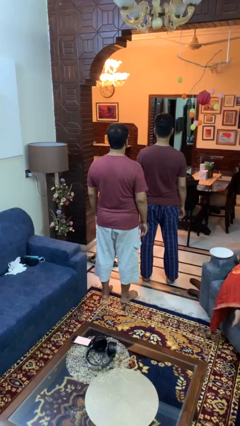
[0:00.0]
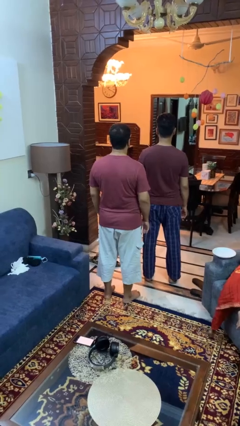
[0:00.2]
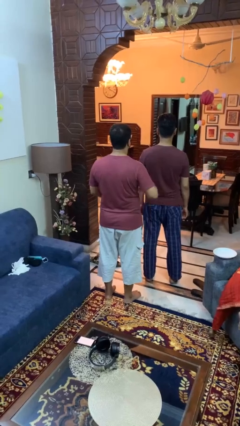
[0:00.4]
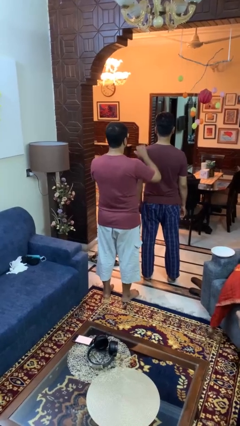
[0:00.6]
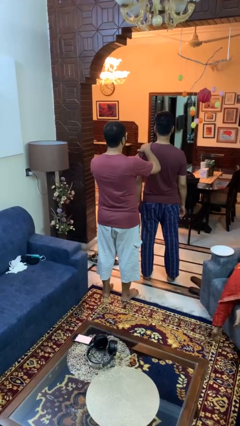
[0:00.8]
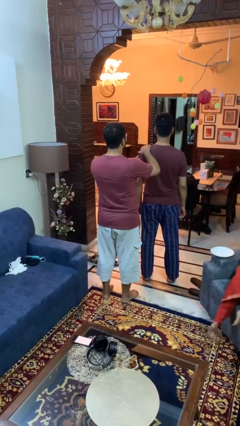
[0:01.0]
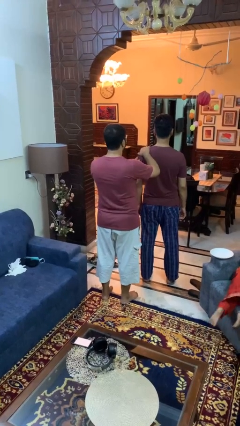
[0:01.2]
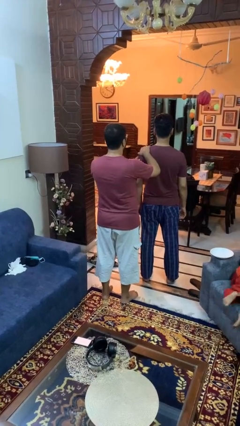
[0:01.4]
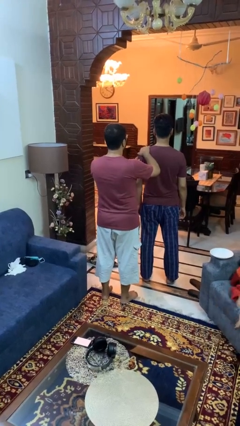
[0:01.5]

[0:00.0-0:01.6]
person grabs person by shoulder

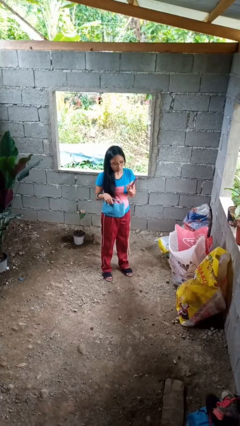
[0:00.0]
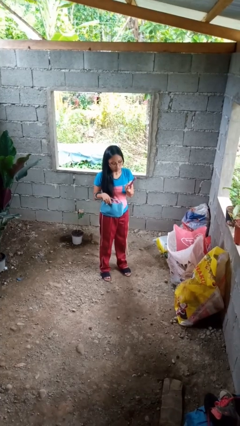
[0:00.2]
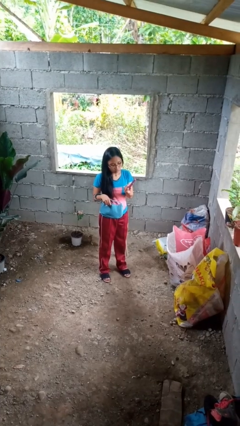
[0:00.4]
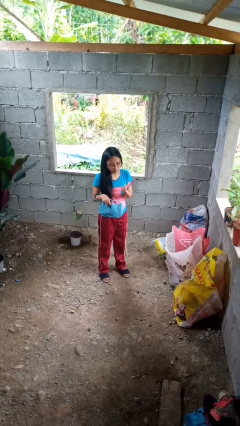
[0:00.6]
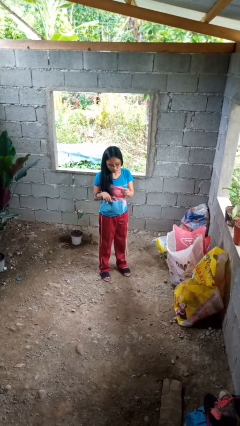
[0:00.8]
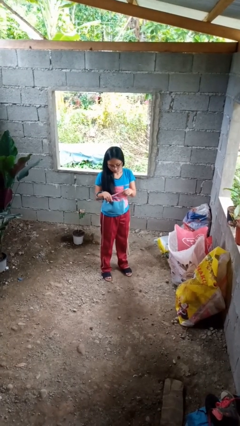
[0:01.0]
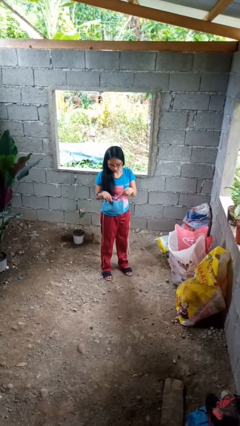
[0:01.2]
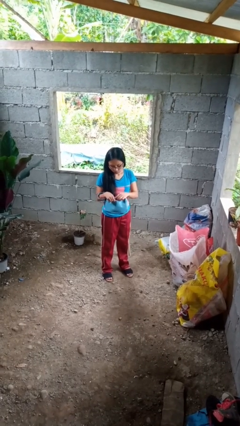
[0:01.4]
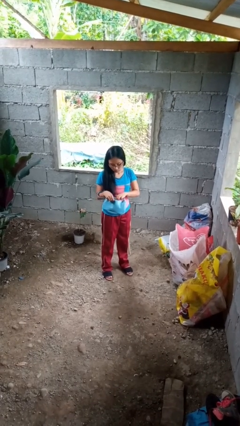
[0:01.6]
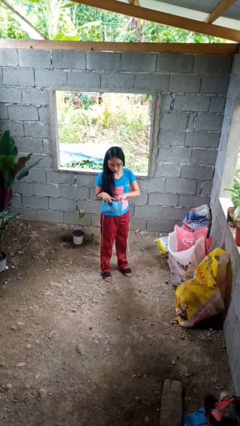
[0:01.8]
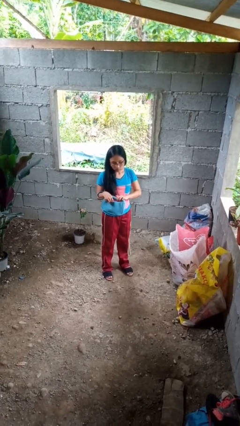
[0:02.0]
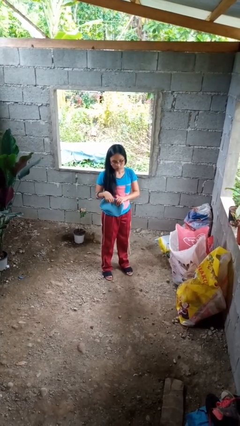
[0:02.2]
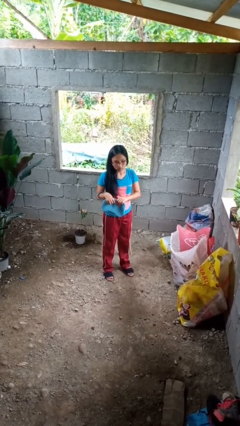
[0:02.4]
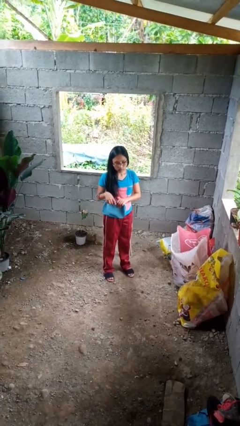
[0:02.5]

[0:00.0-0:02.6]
person puts object into purse

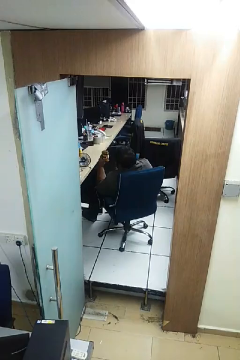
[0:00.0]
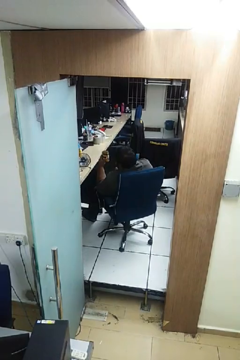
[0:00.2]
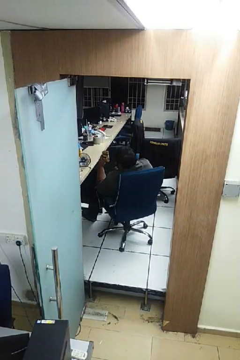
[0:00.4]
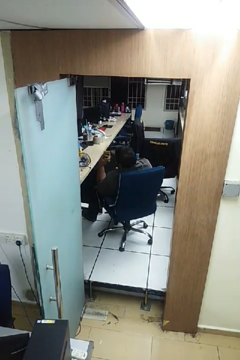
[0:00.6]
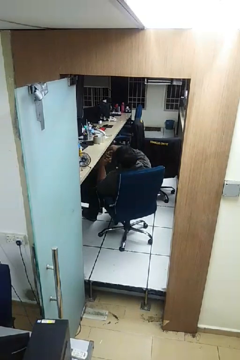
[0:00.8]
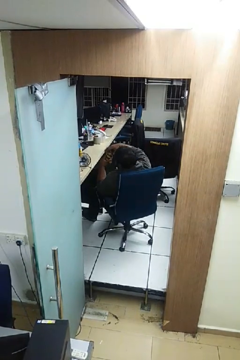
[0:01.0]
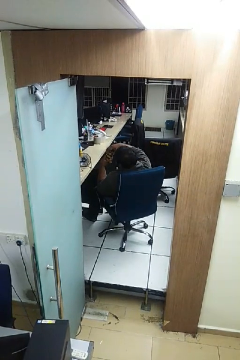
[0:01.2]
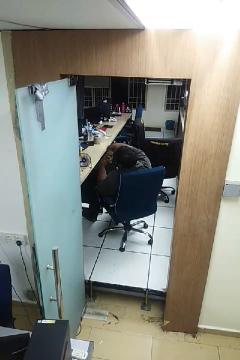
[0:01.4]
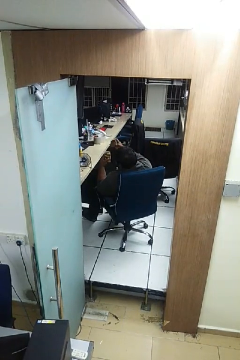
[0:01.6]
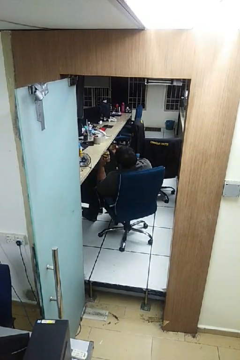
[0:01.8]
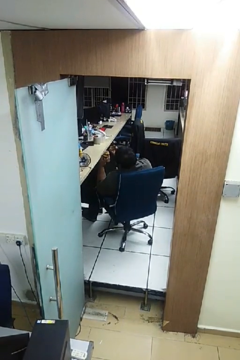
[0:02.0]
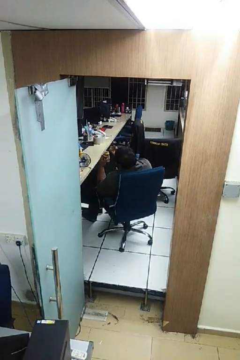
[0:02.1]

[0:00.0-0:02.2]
person opens jar

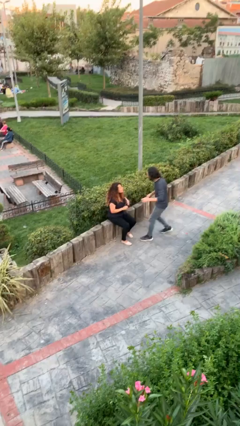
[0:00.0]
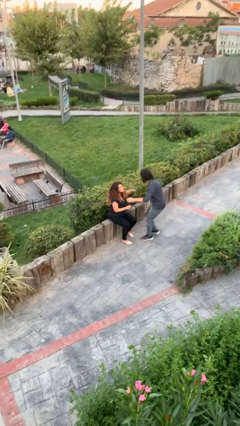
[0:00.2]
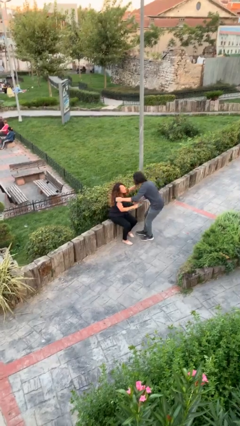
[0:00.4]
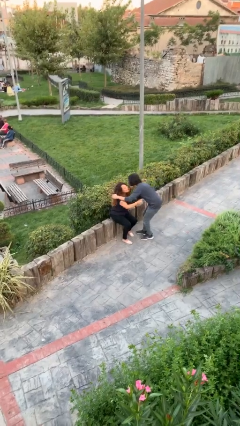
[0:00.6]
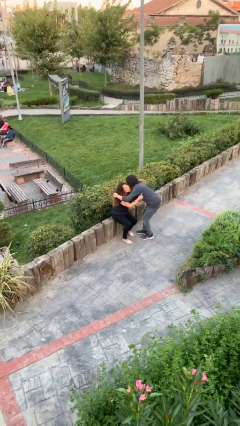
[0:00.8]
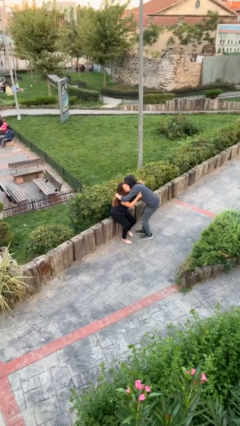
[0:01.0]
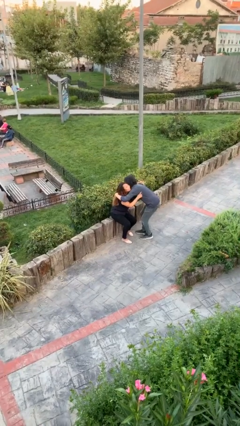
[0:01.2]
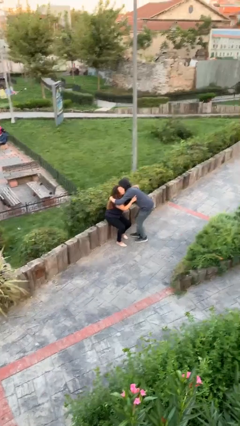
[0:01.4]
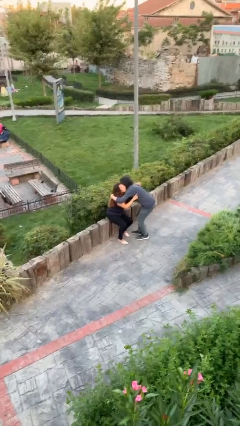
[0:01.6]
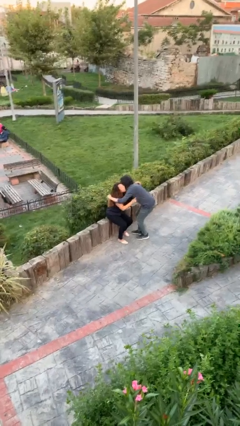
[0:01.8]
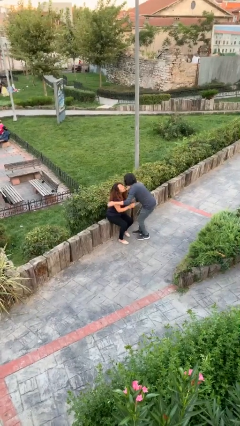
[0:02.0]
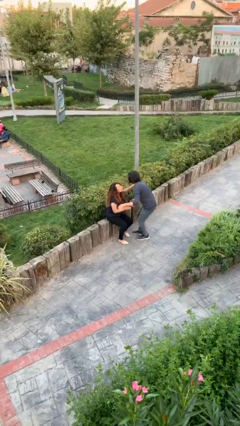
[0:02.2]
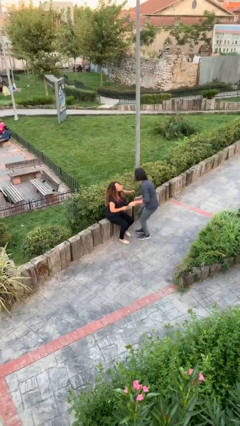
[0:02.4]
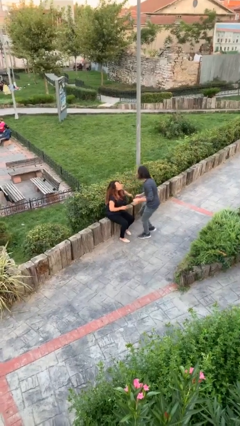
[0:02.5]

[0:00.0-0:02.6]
person embraces person

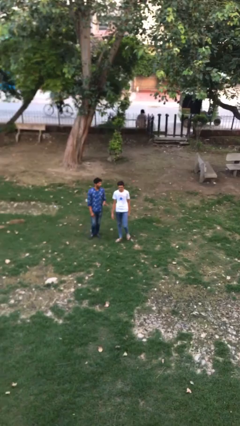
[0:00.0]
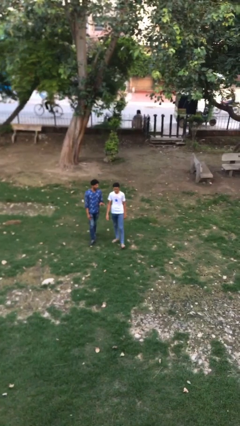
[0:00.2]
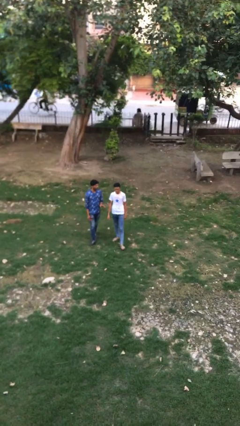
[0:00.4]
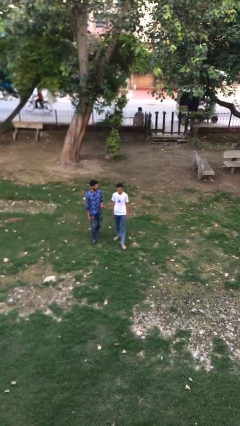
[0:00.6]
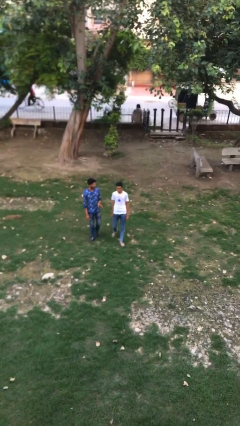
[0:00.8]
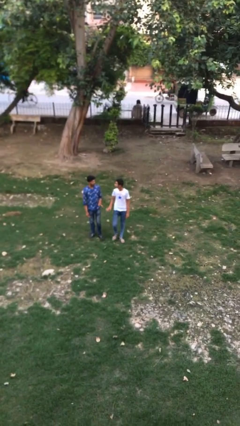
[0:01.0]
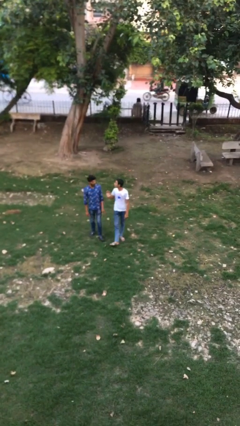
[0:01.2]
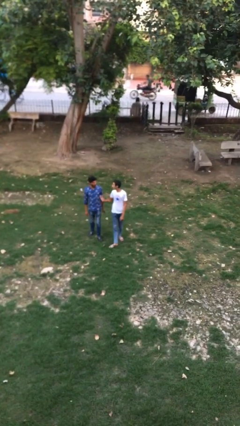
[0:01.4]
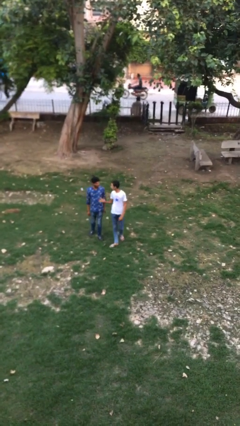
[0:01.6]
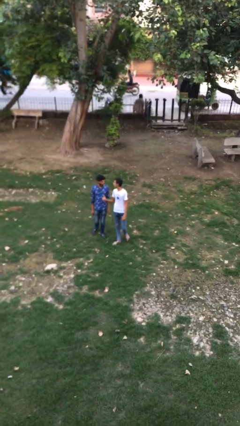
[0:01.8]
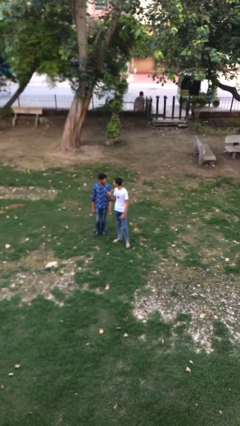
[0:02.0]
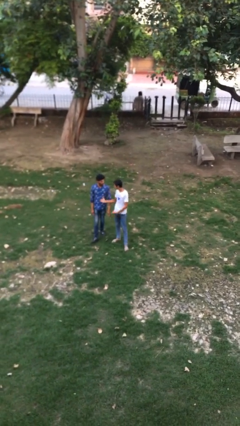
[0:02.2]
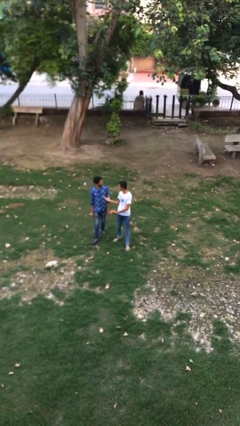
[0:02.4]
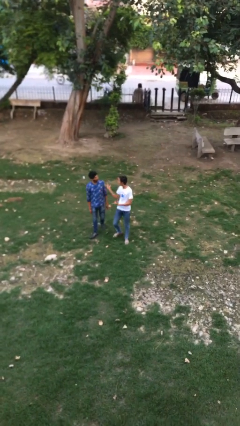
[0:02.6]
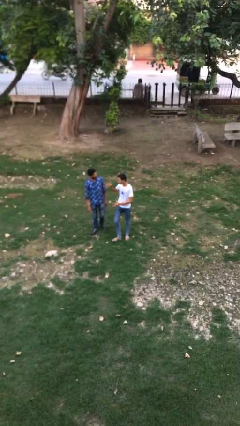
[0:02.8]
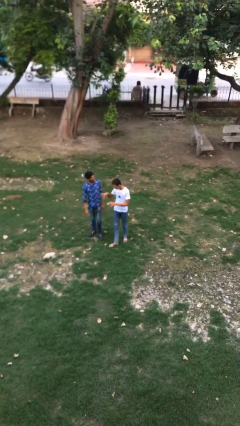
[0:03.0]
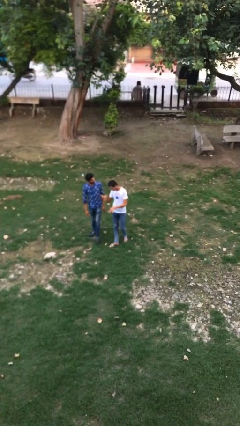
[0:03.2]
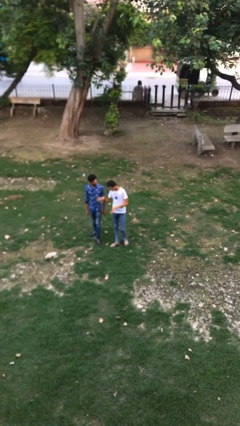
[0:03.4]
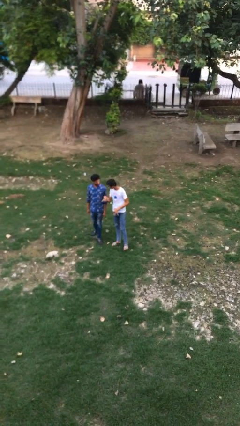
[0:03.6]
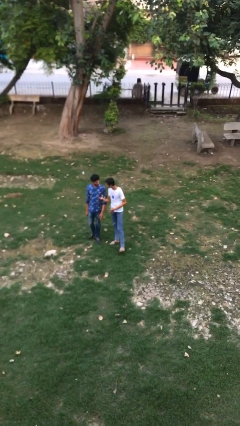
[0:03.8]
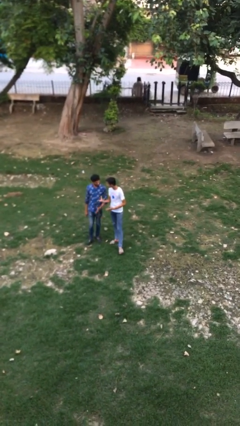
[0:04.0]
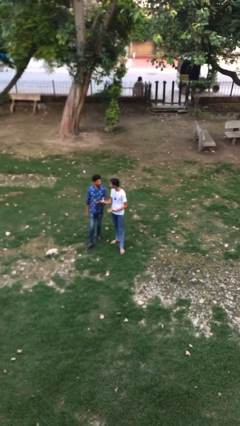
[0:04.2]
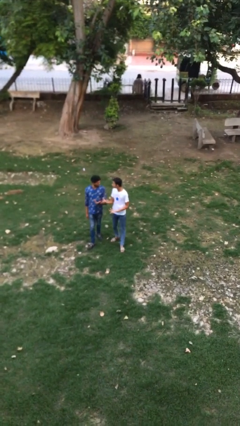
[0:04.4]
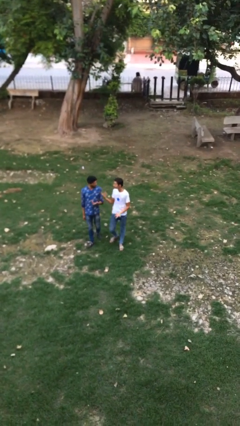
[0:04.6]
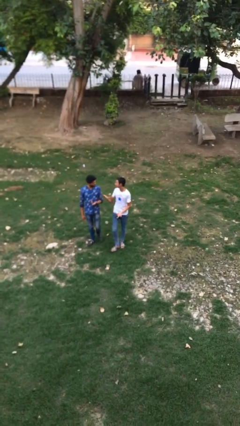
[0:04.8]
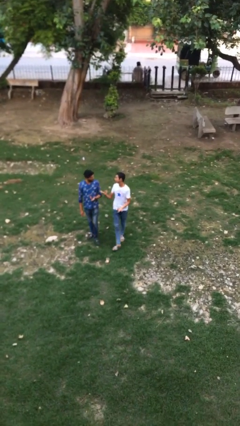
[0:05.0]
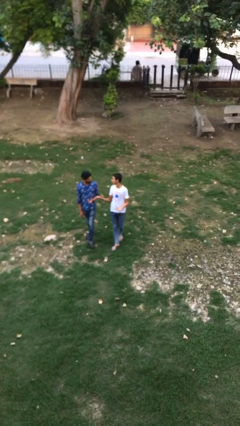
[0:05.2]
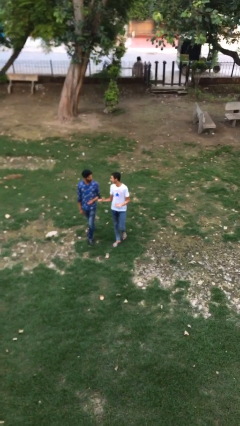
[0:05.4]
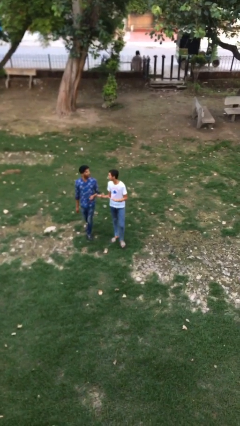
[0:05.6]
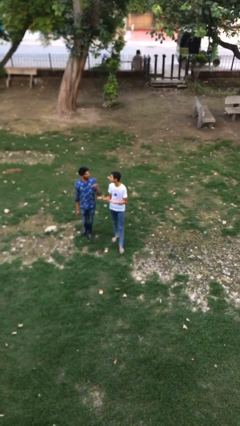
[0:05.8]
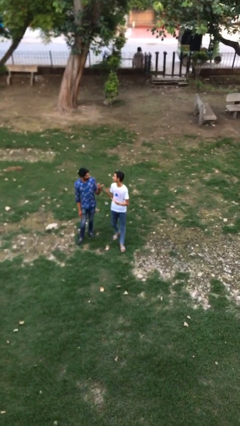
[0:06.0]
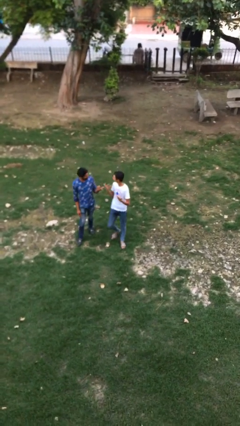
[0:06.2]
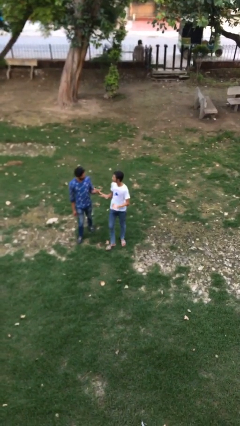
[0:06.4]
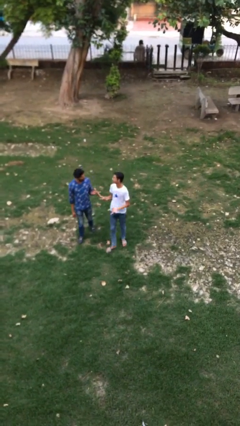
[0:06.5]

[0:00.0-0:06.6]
person talks to person

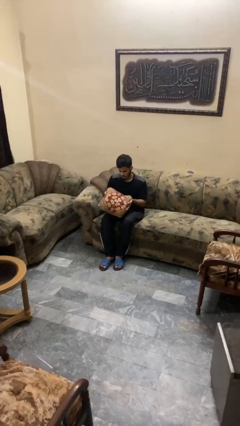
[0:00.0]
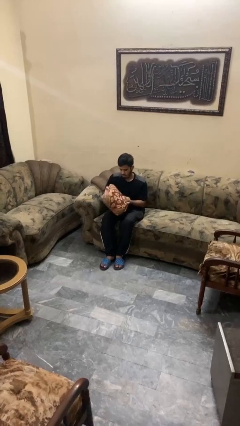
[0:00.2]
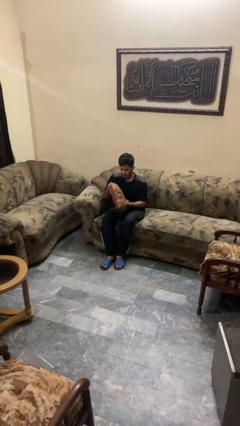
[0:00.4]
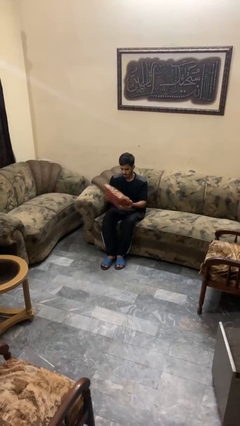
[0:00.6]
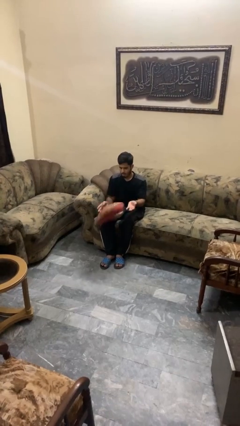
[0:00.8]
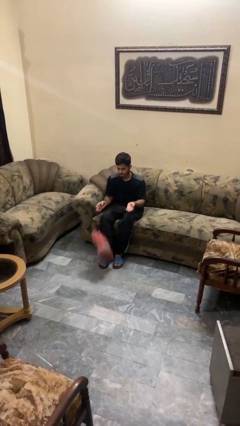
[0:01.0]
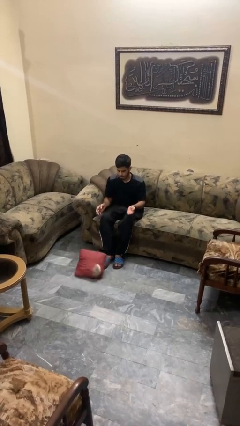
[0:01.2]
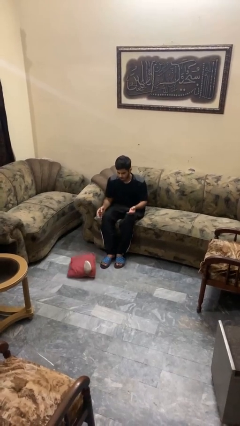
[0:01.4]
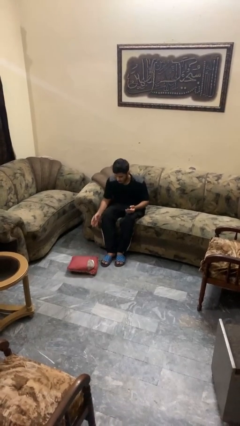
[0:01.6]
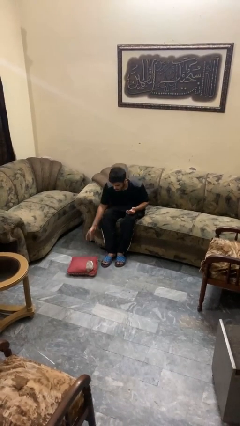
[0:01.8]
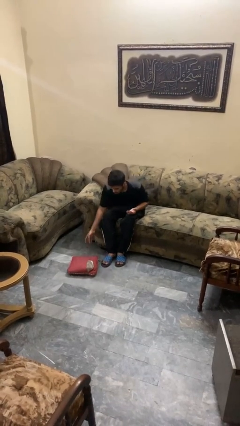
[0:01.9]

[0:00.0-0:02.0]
person drops object
